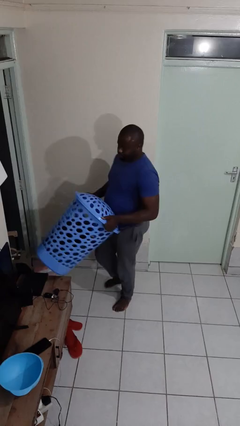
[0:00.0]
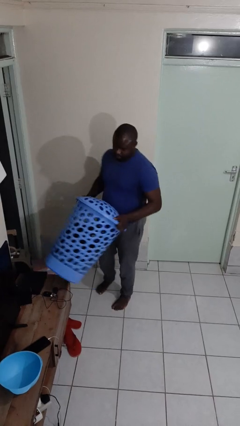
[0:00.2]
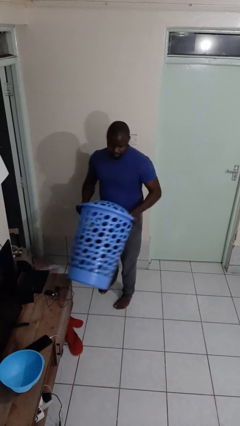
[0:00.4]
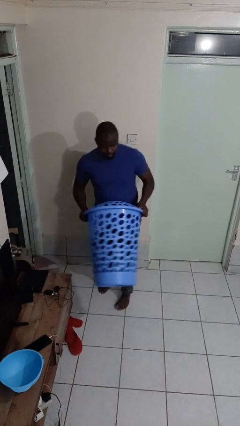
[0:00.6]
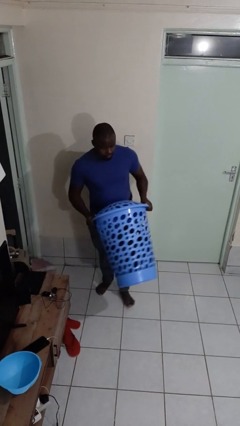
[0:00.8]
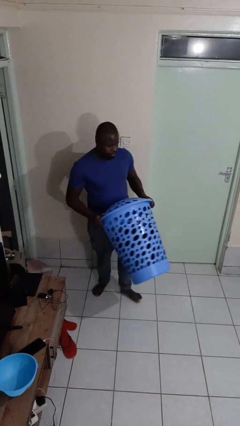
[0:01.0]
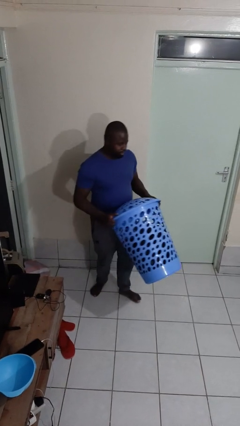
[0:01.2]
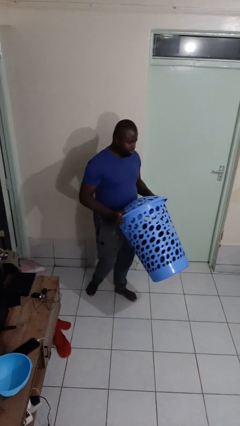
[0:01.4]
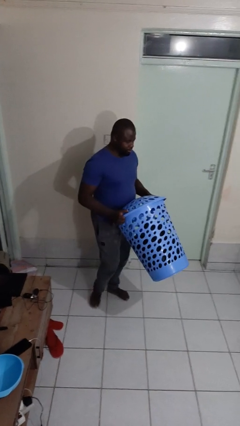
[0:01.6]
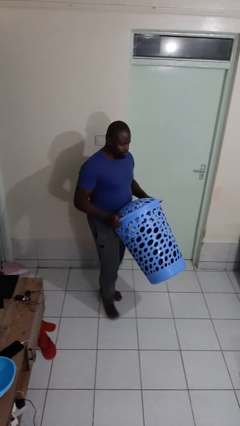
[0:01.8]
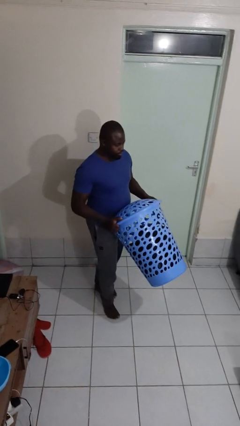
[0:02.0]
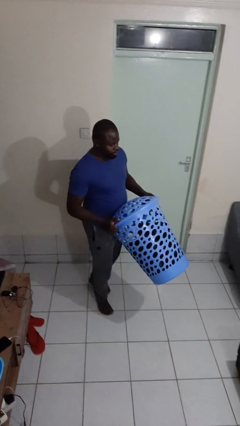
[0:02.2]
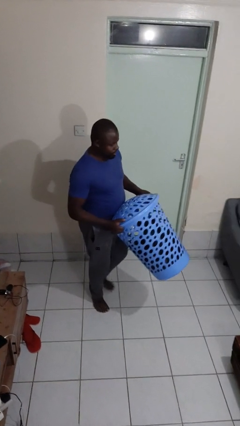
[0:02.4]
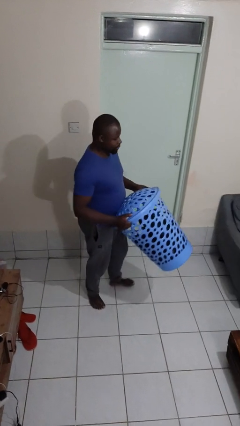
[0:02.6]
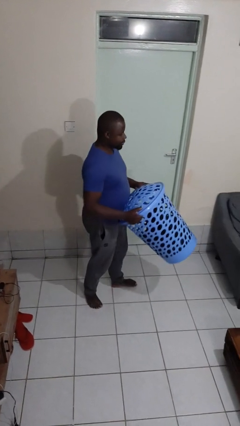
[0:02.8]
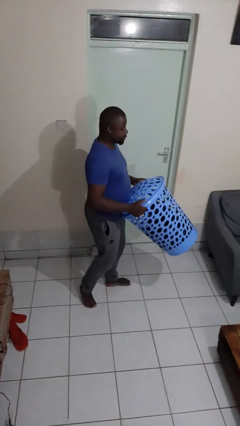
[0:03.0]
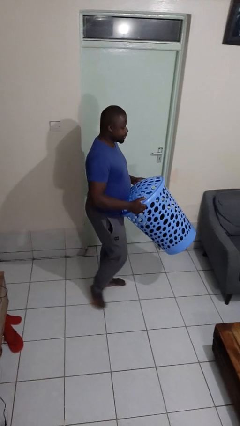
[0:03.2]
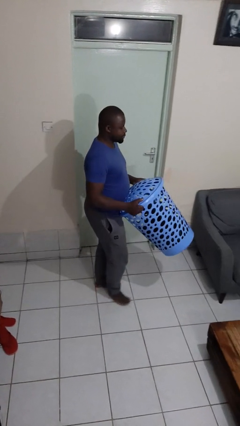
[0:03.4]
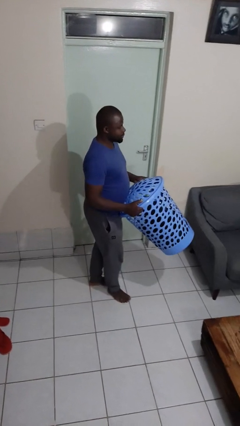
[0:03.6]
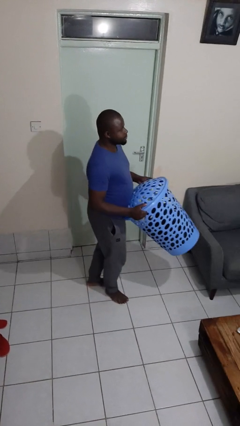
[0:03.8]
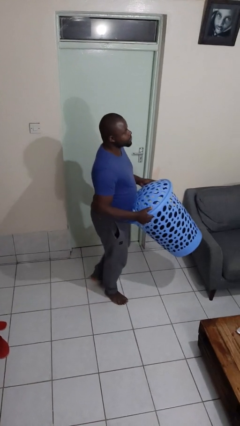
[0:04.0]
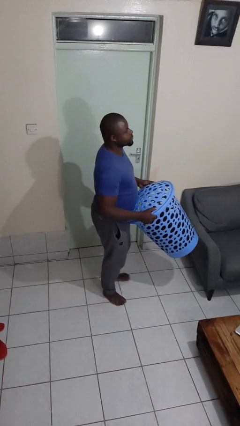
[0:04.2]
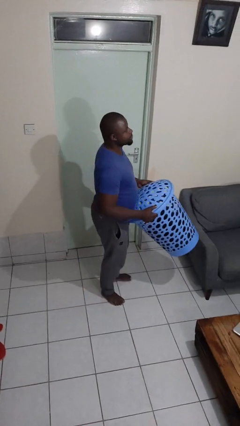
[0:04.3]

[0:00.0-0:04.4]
person carries laundry basket

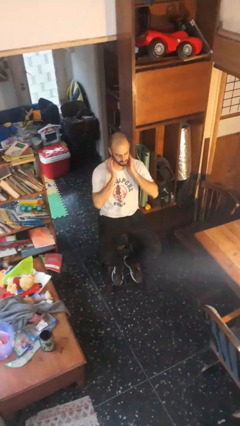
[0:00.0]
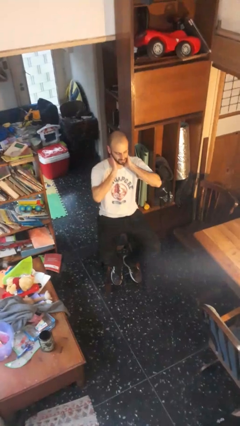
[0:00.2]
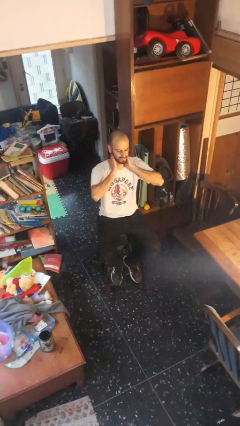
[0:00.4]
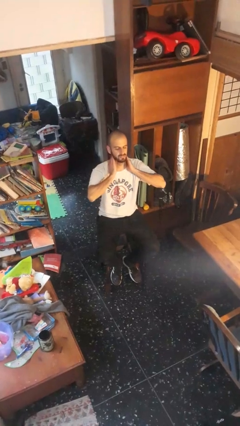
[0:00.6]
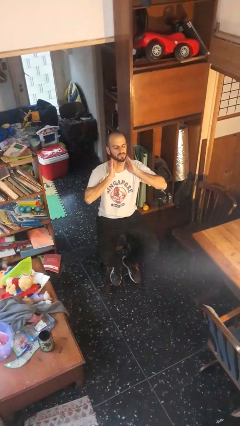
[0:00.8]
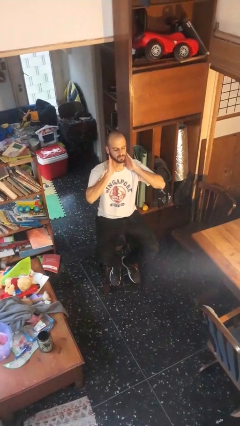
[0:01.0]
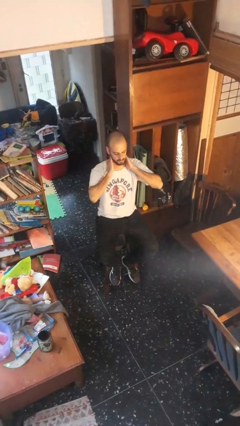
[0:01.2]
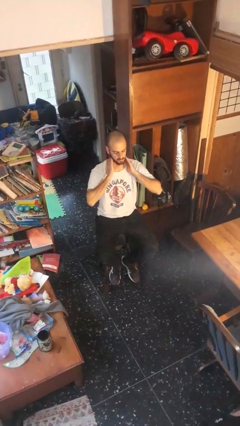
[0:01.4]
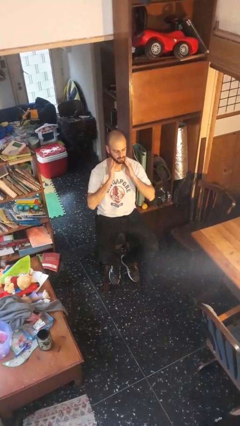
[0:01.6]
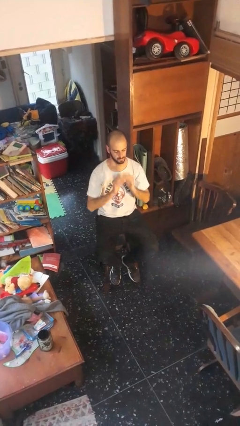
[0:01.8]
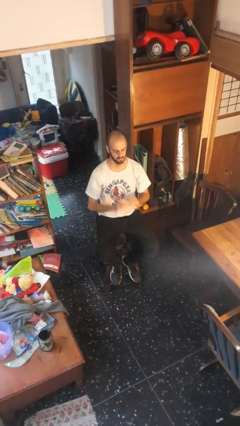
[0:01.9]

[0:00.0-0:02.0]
person rubs neck

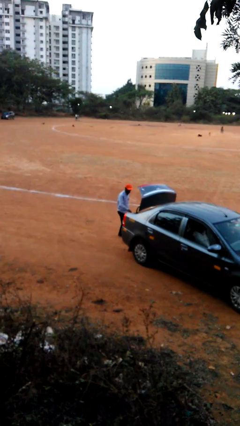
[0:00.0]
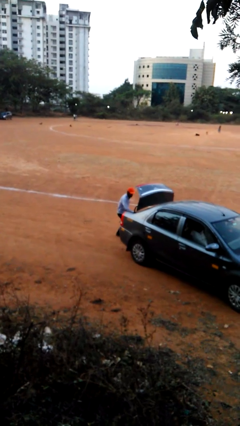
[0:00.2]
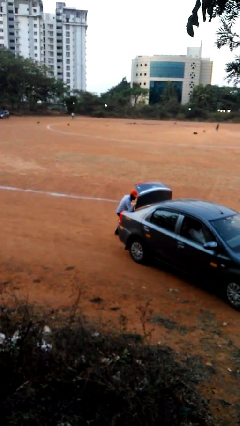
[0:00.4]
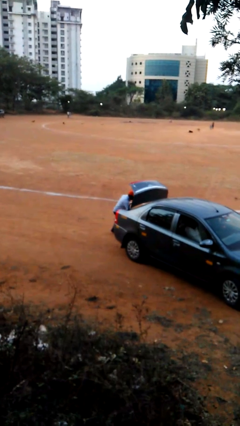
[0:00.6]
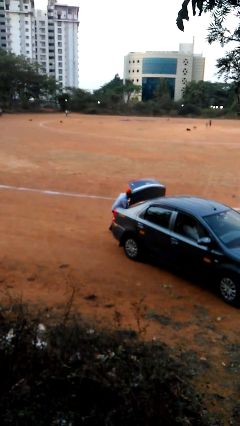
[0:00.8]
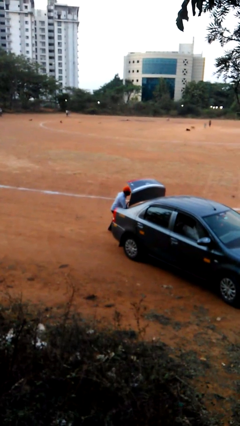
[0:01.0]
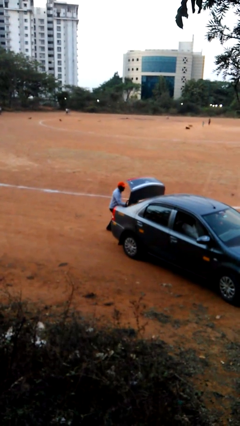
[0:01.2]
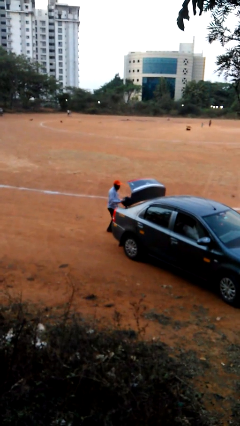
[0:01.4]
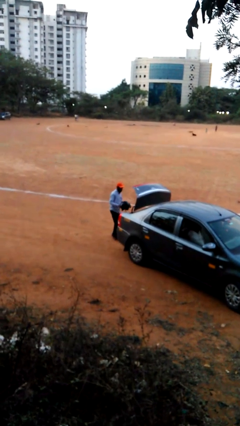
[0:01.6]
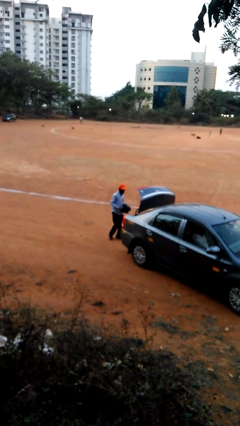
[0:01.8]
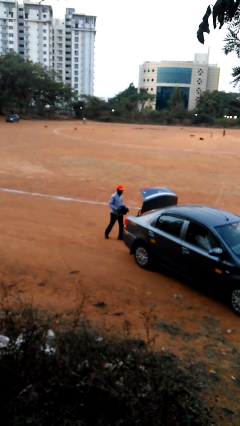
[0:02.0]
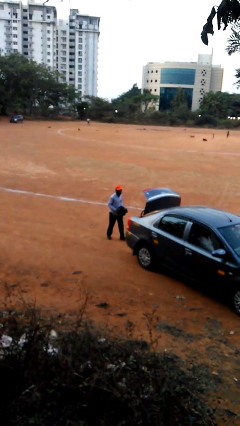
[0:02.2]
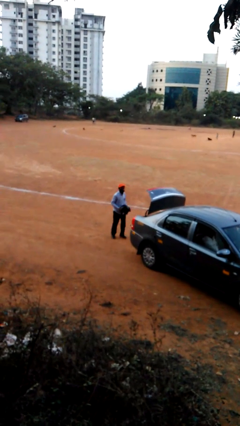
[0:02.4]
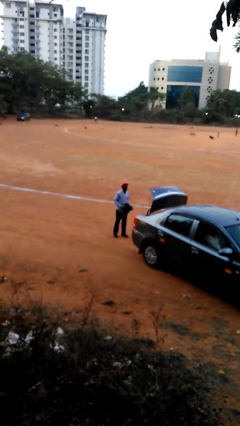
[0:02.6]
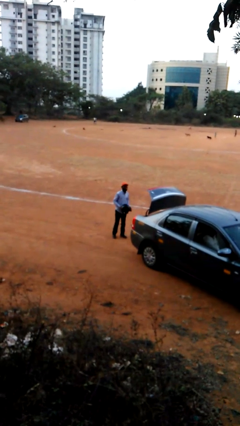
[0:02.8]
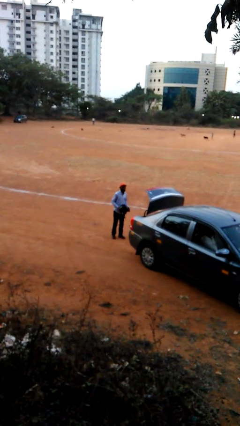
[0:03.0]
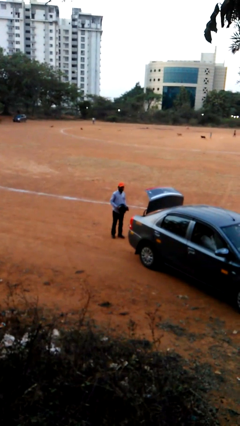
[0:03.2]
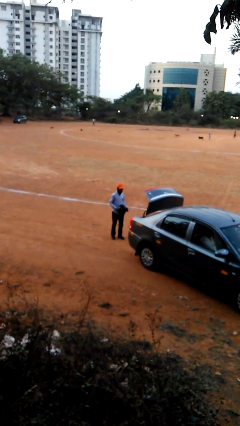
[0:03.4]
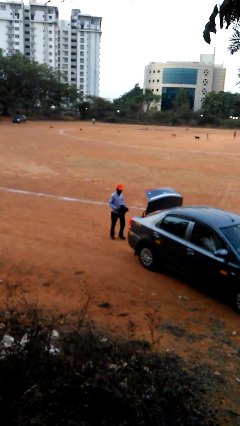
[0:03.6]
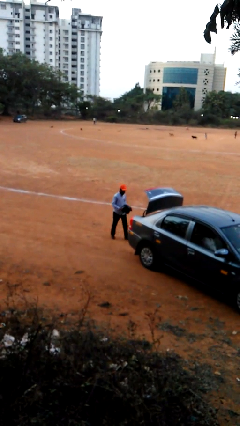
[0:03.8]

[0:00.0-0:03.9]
person unloads car

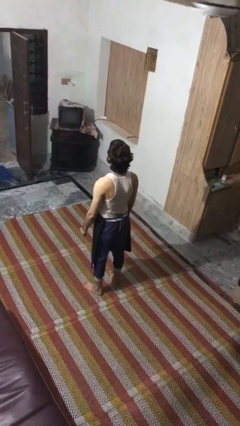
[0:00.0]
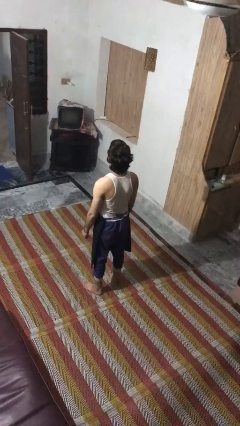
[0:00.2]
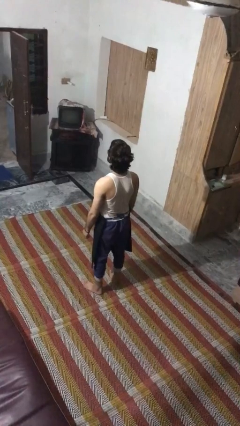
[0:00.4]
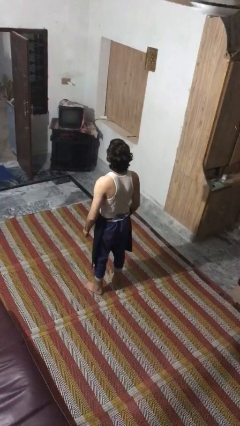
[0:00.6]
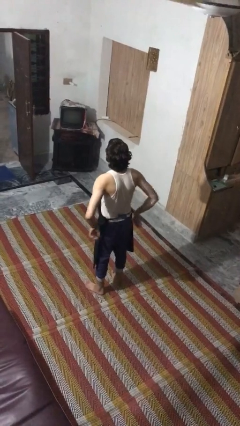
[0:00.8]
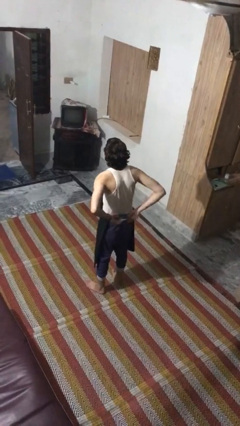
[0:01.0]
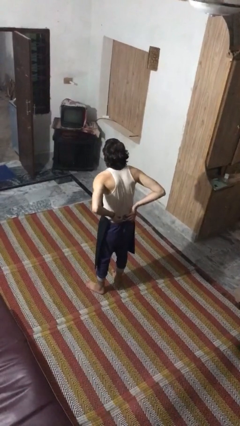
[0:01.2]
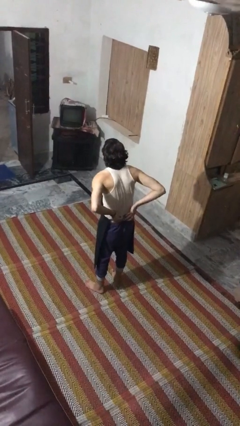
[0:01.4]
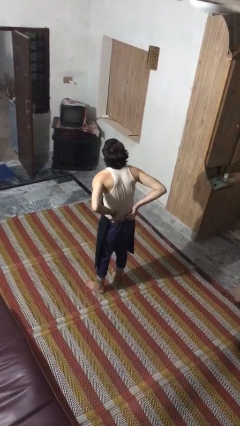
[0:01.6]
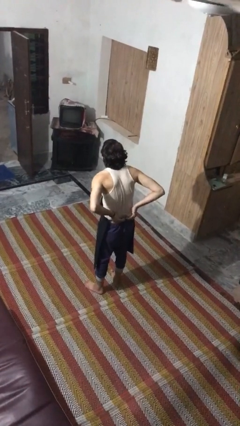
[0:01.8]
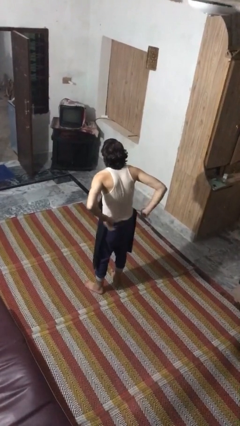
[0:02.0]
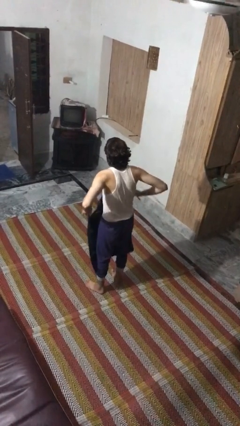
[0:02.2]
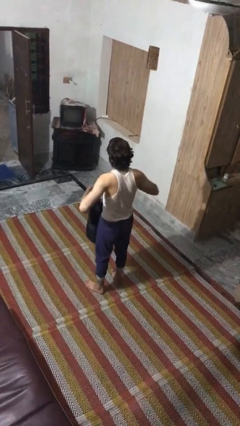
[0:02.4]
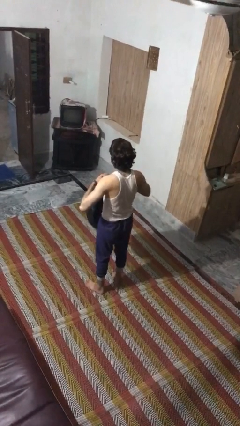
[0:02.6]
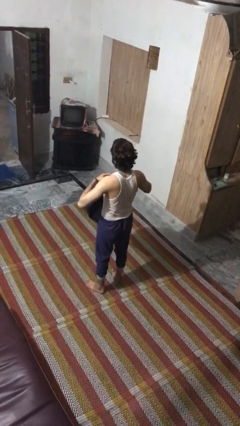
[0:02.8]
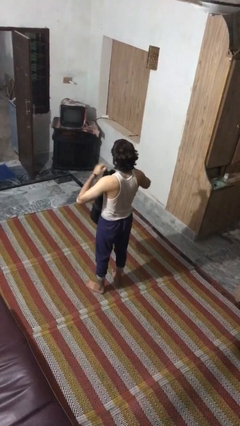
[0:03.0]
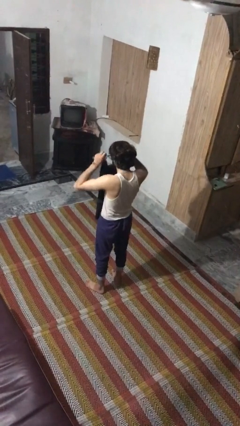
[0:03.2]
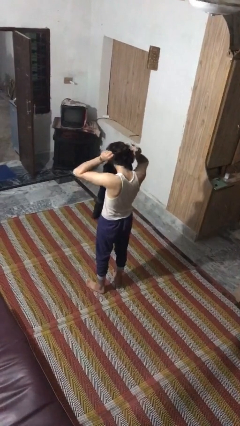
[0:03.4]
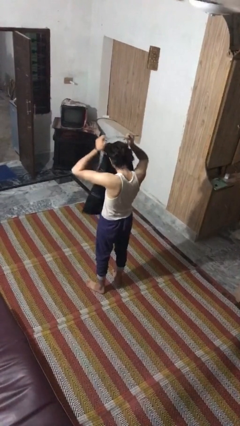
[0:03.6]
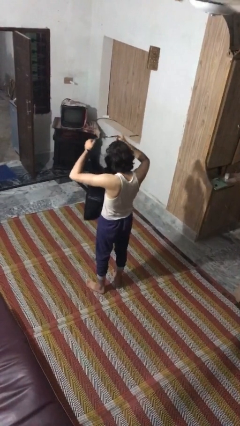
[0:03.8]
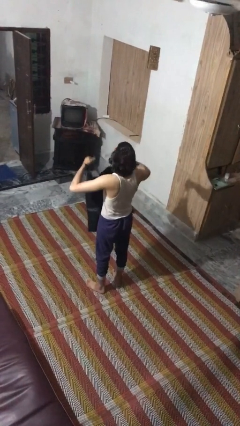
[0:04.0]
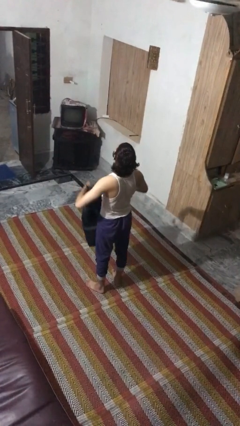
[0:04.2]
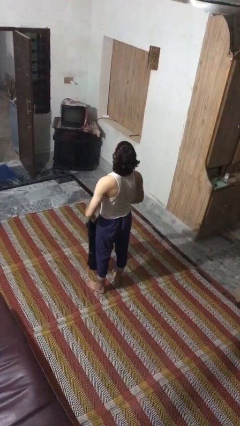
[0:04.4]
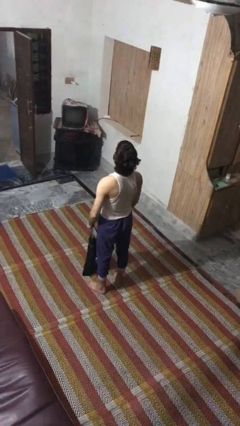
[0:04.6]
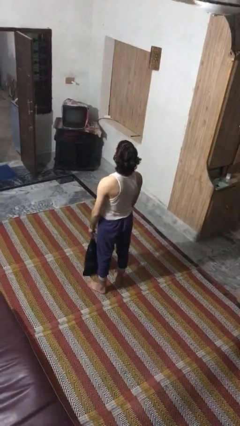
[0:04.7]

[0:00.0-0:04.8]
person takes off apron

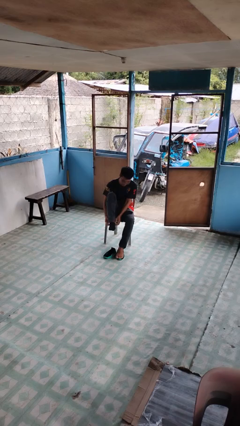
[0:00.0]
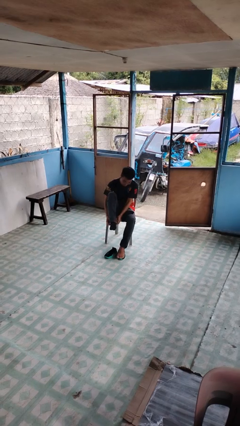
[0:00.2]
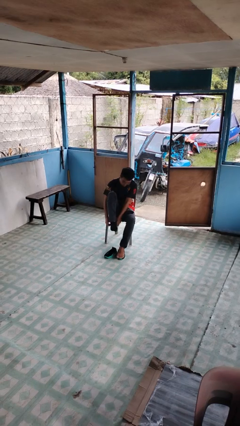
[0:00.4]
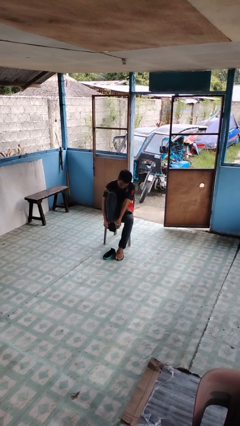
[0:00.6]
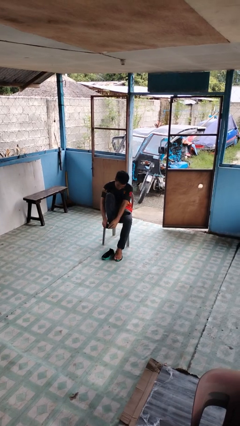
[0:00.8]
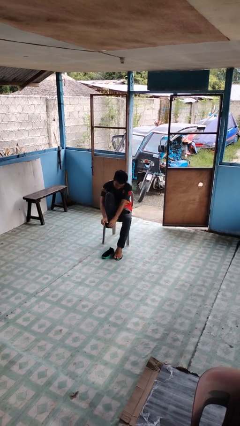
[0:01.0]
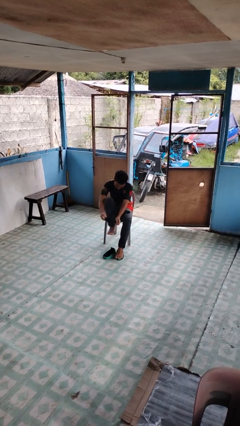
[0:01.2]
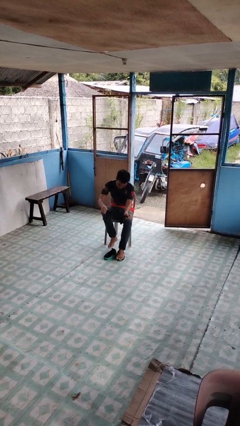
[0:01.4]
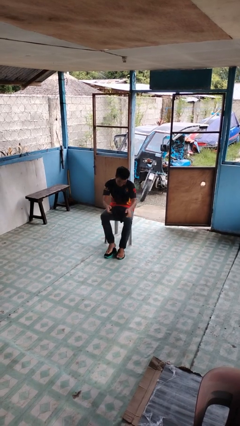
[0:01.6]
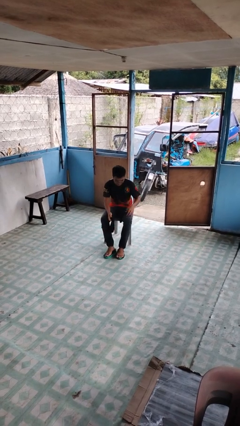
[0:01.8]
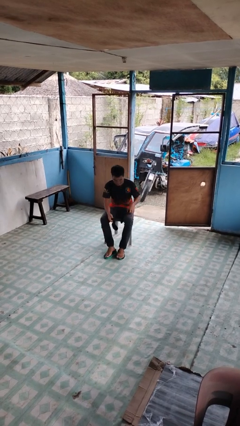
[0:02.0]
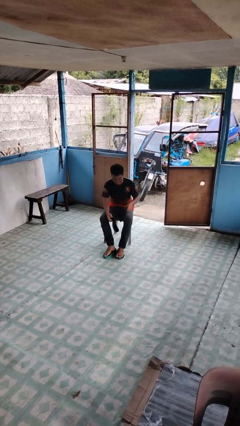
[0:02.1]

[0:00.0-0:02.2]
person takes off socks

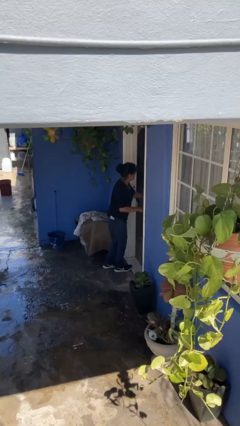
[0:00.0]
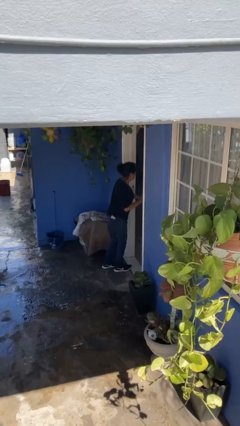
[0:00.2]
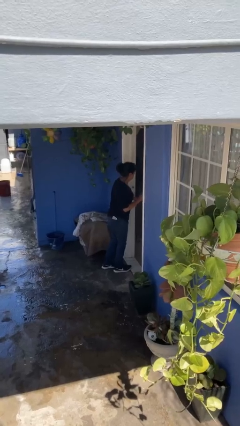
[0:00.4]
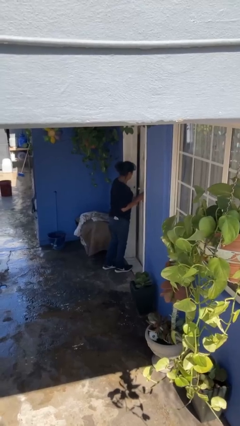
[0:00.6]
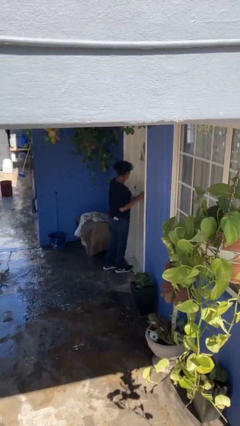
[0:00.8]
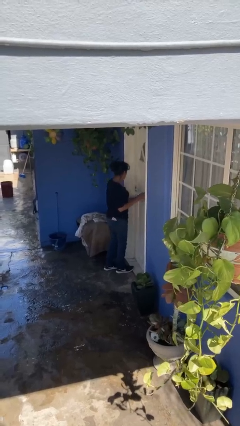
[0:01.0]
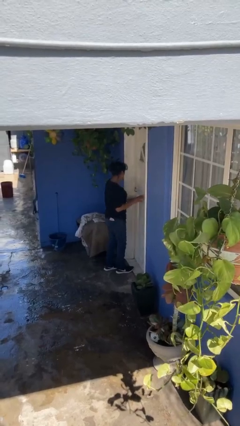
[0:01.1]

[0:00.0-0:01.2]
person closes facility door
